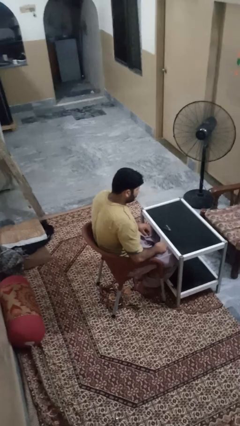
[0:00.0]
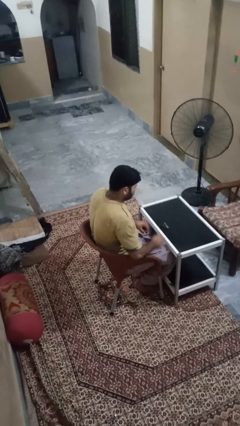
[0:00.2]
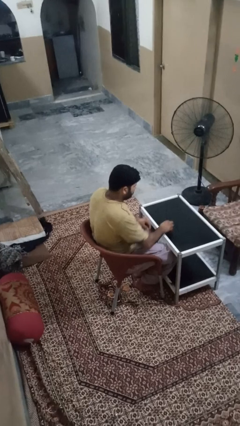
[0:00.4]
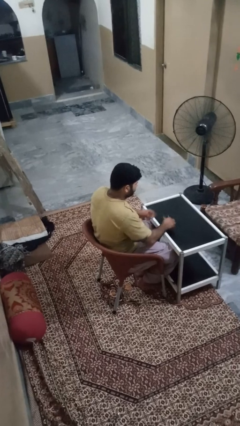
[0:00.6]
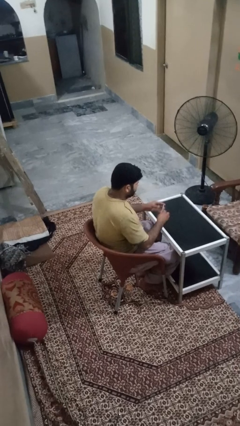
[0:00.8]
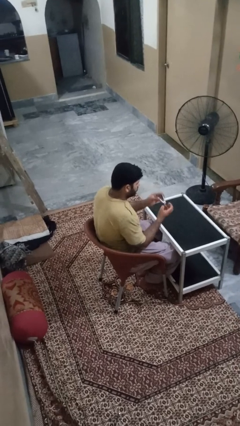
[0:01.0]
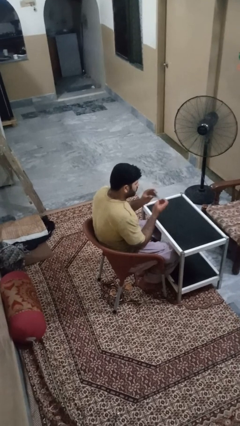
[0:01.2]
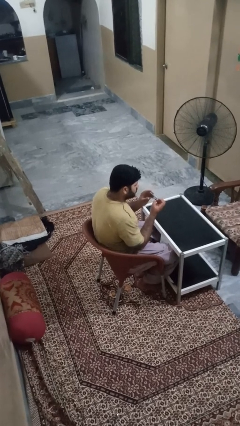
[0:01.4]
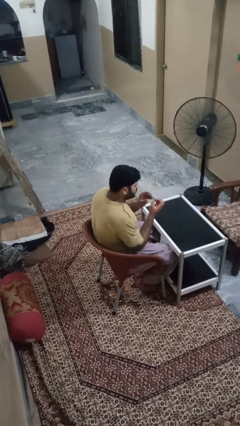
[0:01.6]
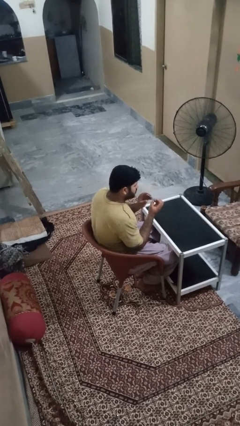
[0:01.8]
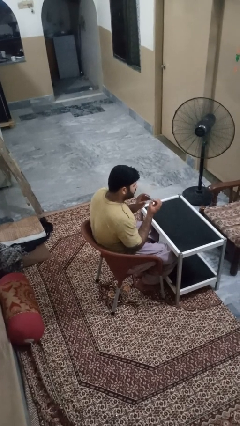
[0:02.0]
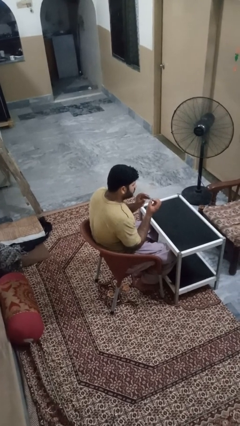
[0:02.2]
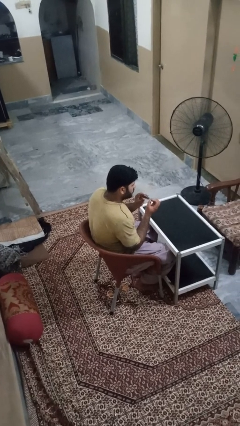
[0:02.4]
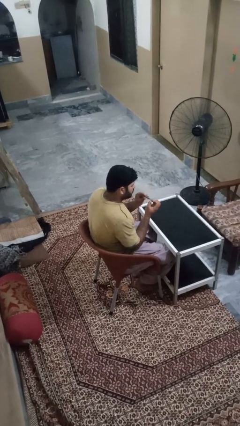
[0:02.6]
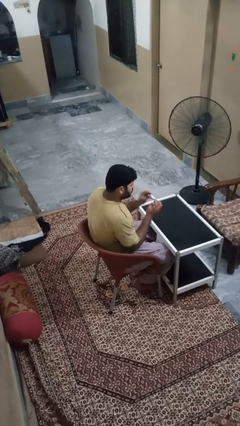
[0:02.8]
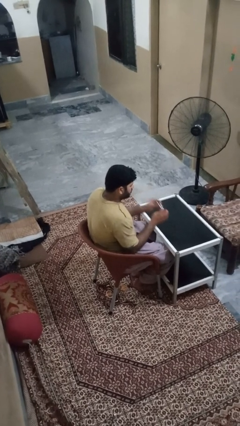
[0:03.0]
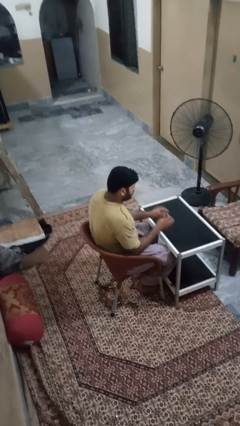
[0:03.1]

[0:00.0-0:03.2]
person clips fingernails

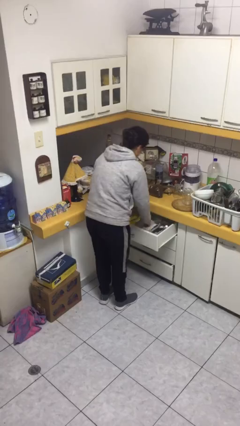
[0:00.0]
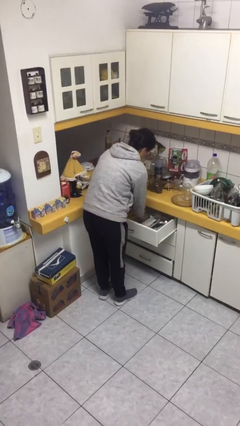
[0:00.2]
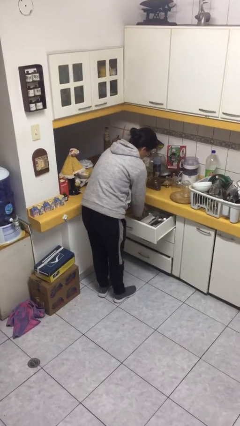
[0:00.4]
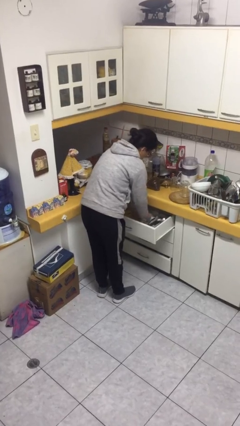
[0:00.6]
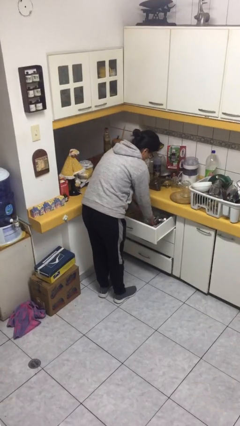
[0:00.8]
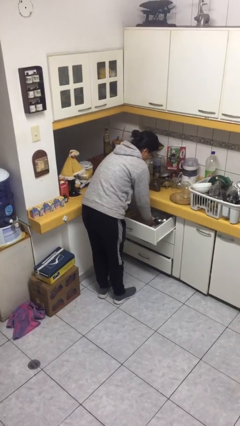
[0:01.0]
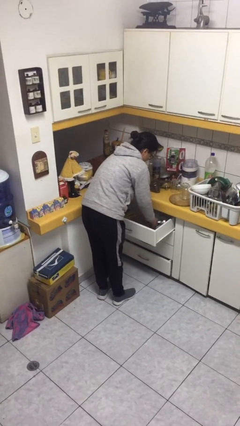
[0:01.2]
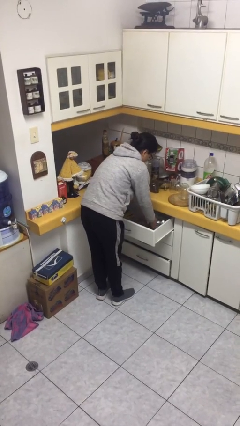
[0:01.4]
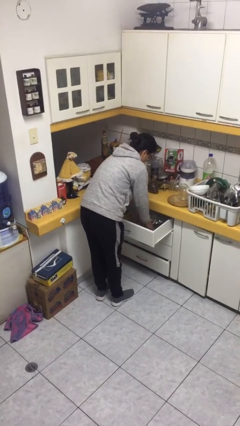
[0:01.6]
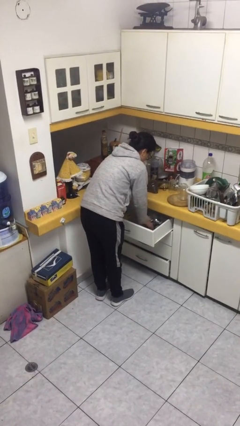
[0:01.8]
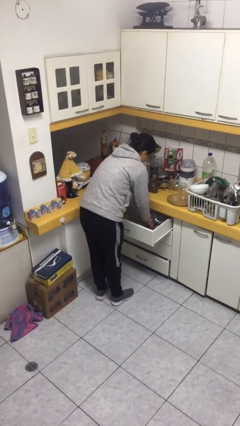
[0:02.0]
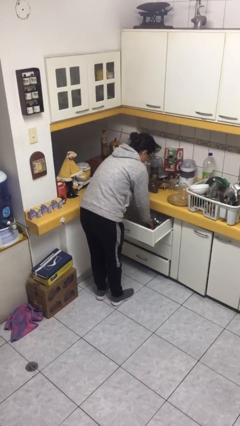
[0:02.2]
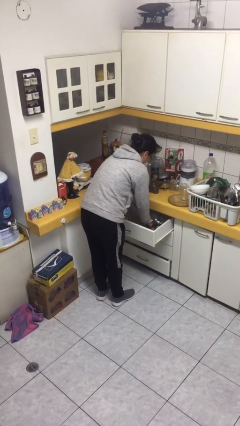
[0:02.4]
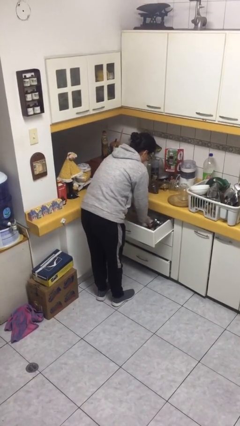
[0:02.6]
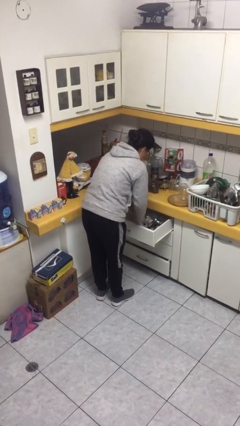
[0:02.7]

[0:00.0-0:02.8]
person searches in kitchen drawer

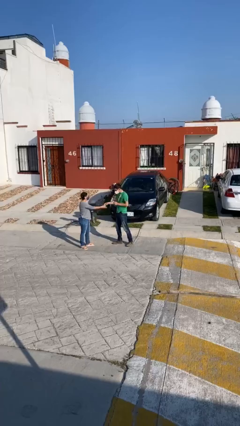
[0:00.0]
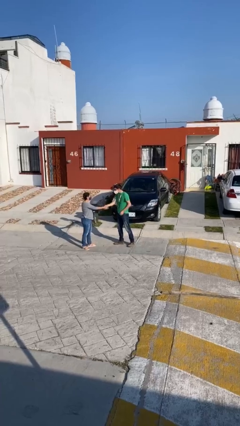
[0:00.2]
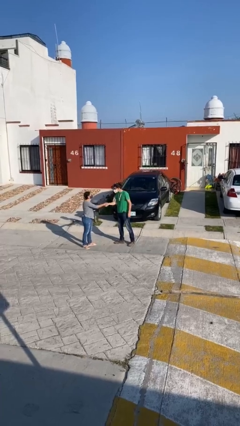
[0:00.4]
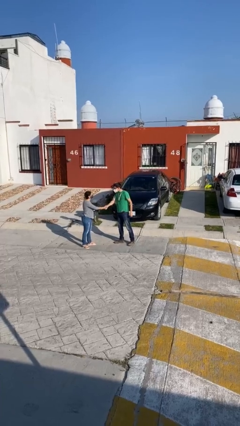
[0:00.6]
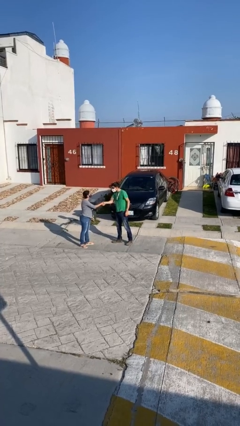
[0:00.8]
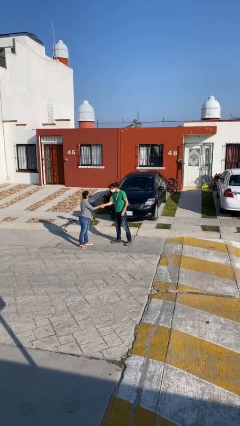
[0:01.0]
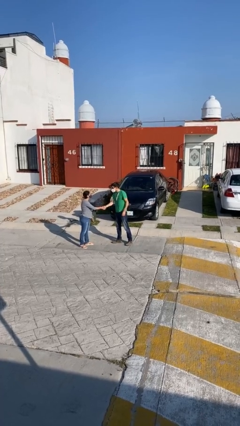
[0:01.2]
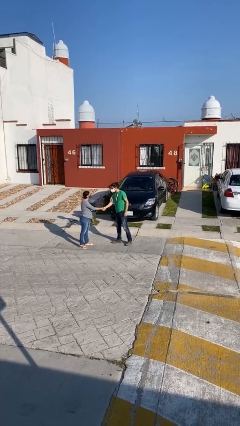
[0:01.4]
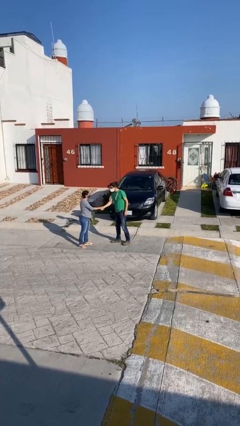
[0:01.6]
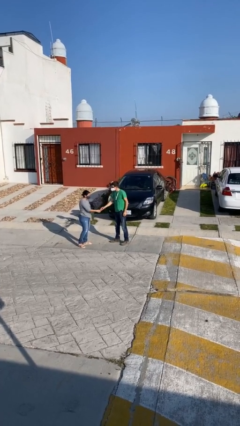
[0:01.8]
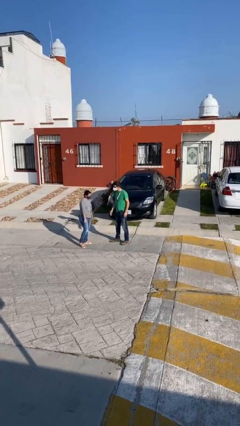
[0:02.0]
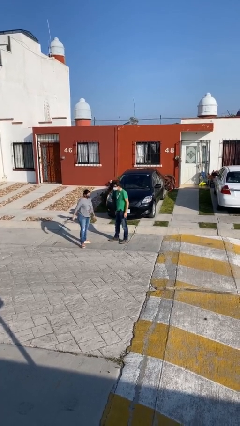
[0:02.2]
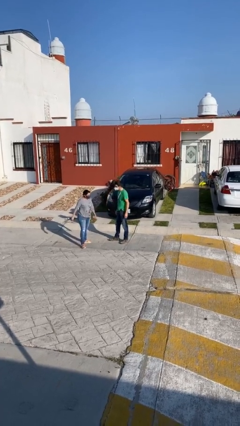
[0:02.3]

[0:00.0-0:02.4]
person shakes hand

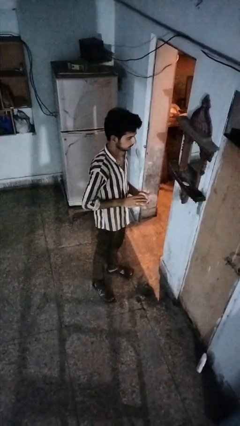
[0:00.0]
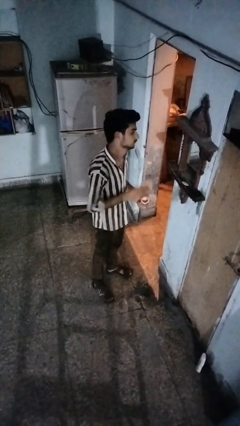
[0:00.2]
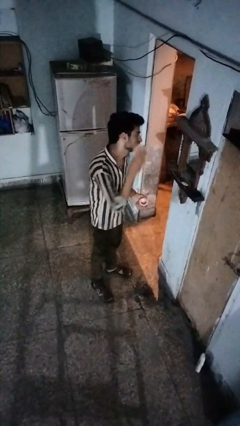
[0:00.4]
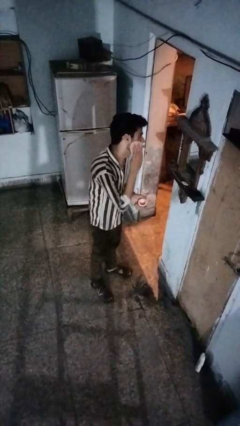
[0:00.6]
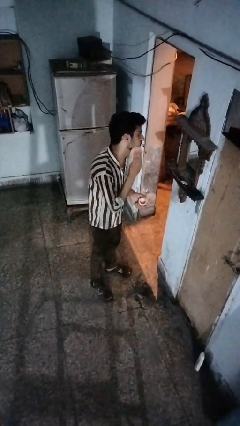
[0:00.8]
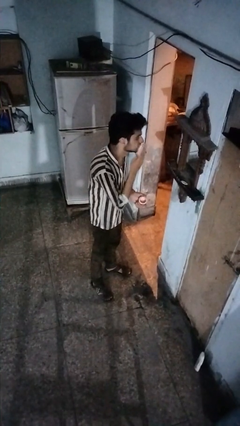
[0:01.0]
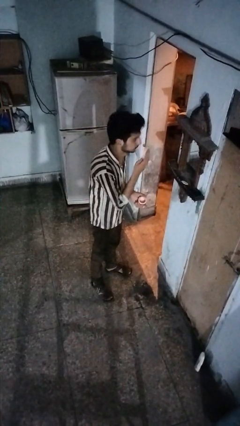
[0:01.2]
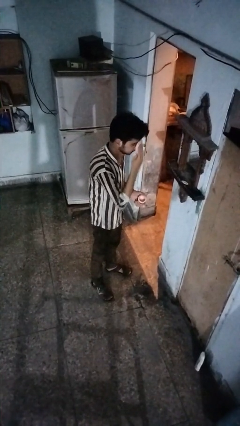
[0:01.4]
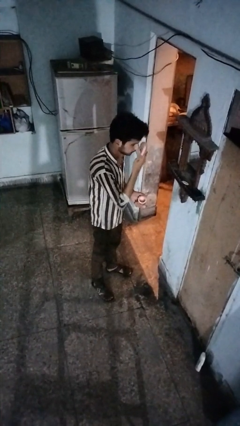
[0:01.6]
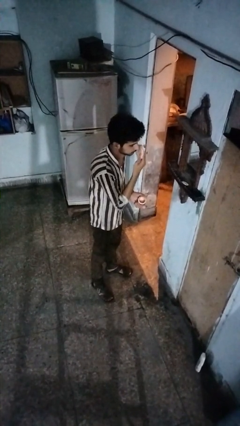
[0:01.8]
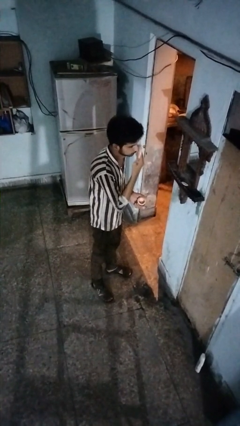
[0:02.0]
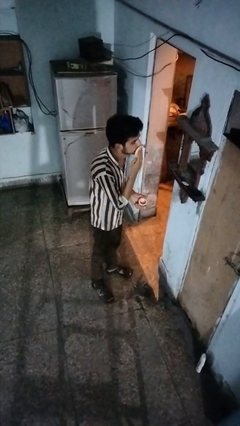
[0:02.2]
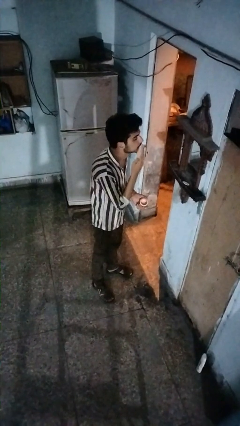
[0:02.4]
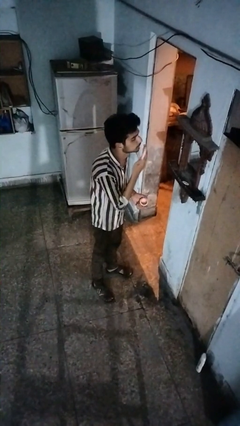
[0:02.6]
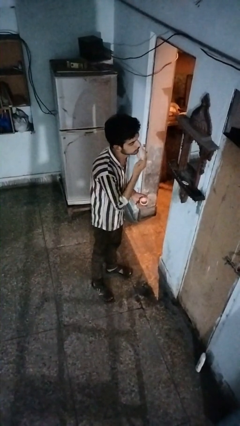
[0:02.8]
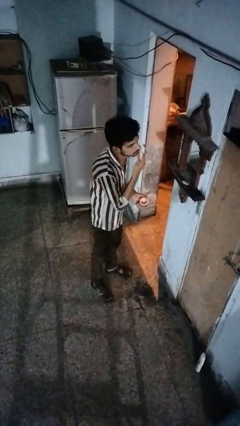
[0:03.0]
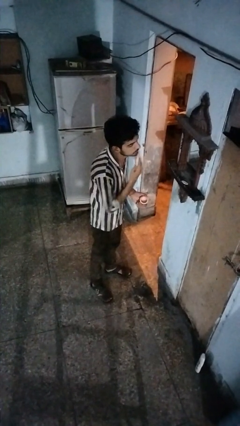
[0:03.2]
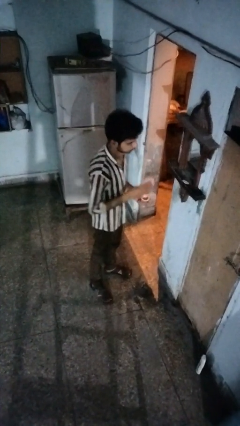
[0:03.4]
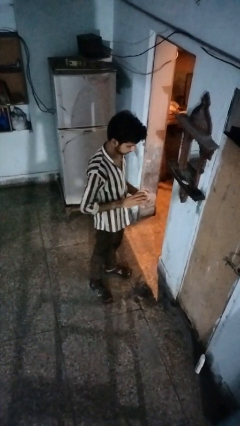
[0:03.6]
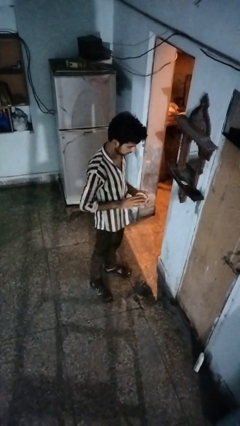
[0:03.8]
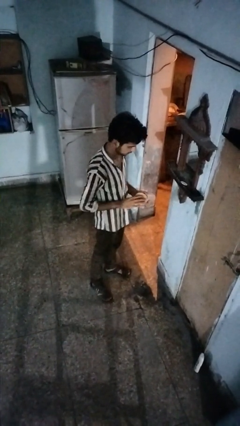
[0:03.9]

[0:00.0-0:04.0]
person applies foundation makeup

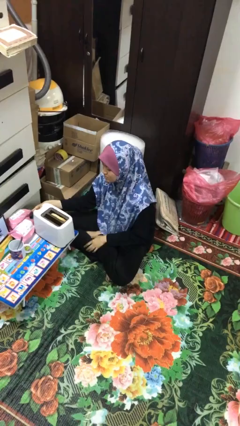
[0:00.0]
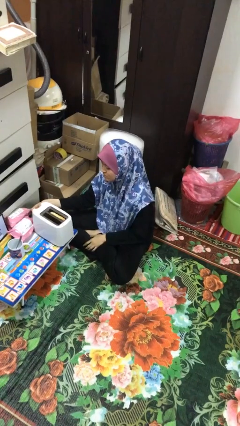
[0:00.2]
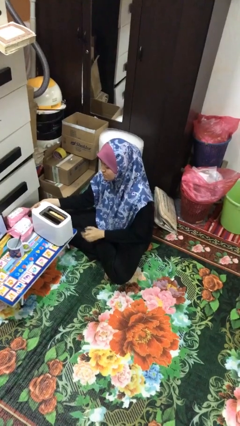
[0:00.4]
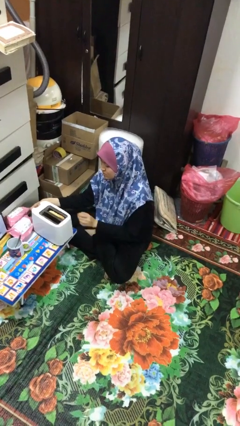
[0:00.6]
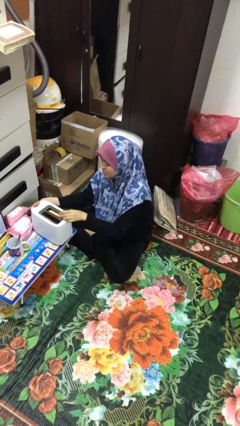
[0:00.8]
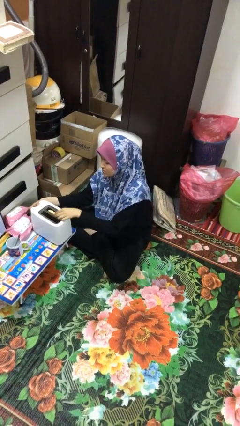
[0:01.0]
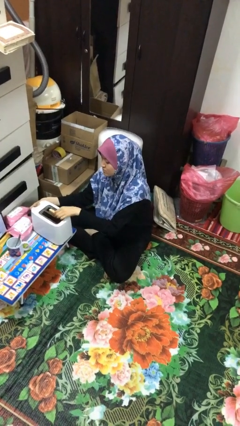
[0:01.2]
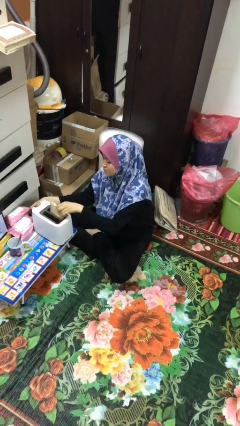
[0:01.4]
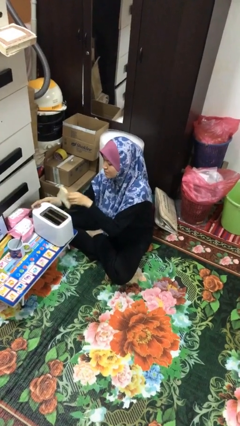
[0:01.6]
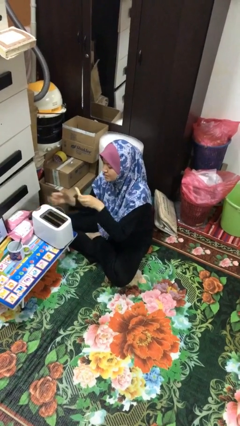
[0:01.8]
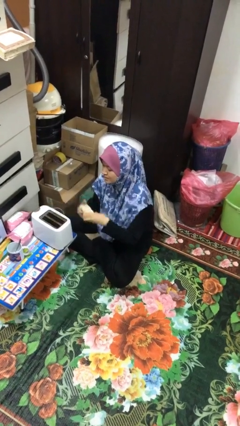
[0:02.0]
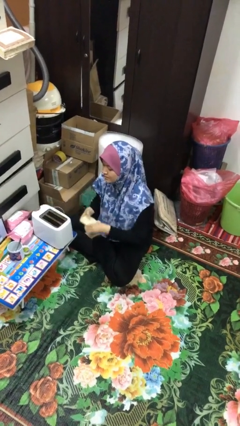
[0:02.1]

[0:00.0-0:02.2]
person takes object from toaster

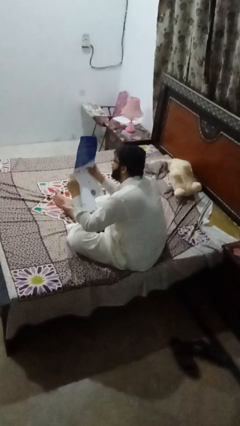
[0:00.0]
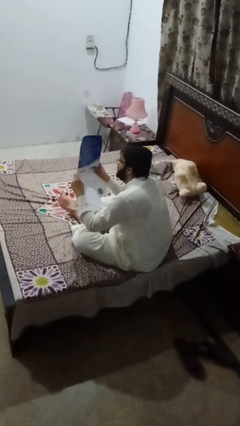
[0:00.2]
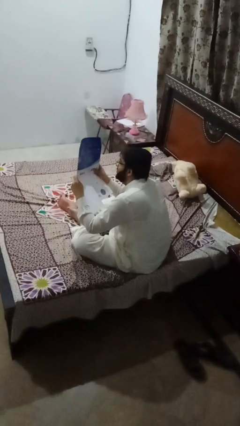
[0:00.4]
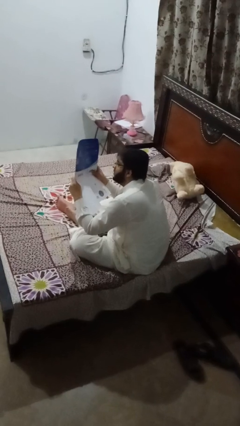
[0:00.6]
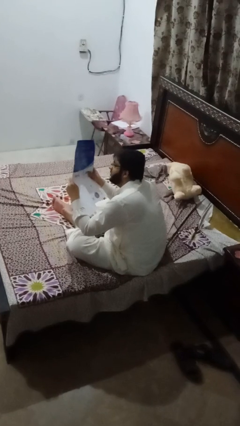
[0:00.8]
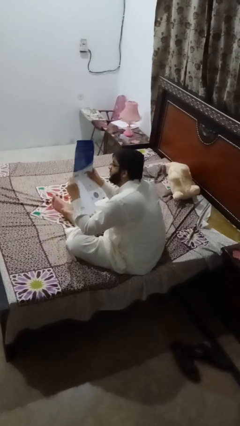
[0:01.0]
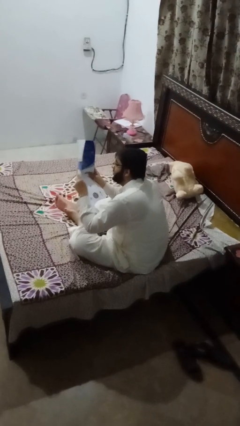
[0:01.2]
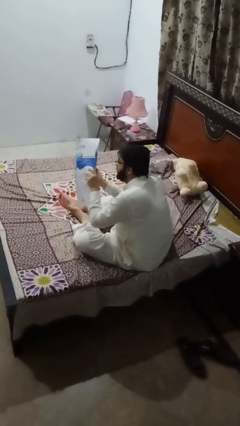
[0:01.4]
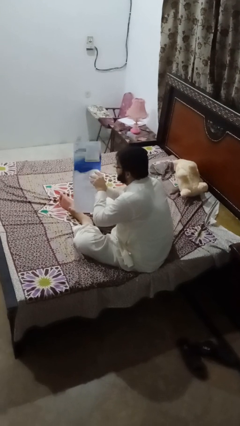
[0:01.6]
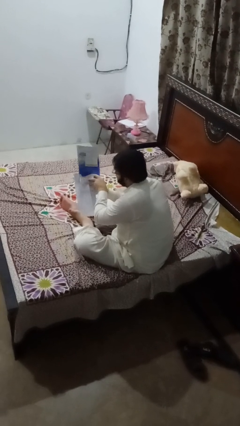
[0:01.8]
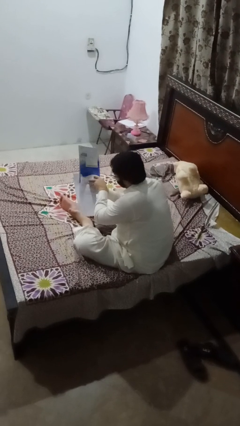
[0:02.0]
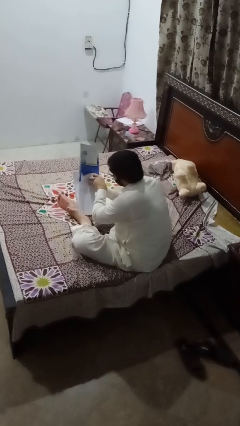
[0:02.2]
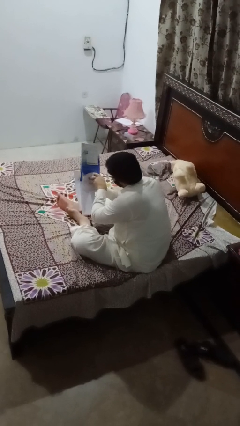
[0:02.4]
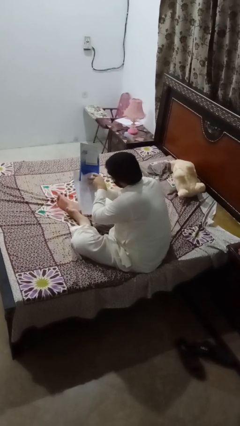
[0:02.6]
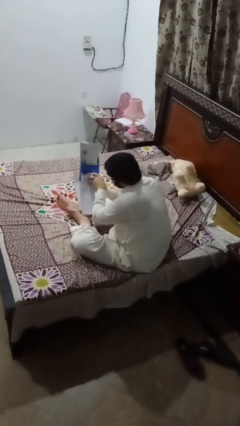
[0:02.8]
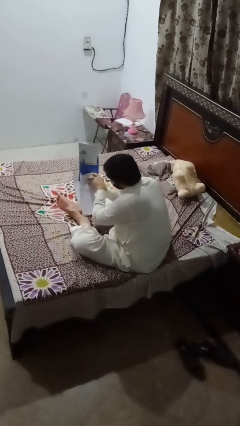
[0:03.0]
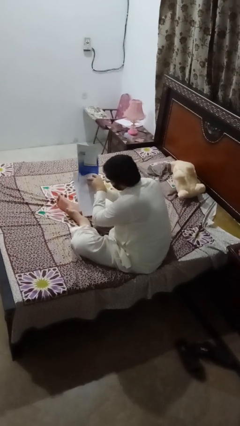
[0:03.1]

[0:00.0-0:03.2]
person reads newspaper
